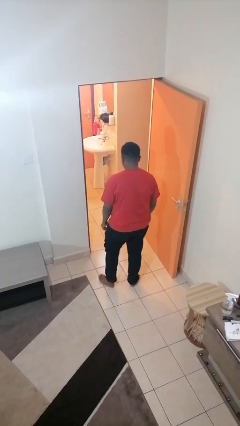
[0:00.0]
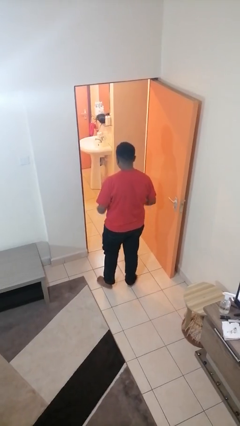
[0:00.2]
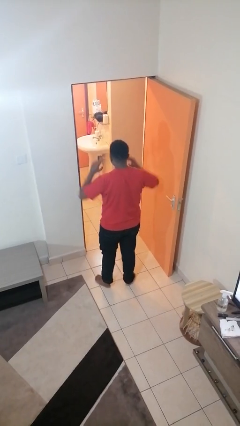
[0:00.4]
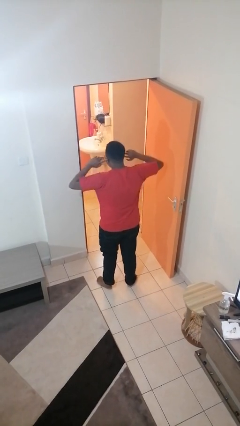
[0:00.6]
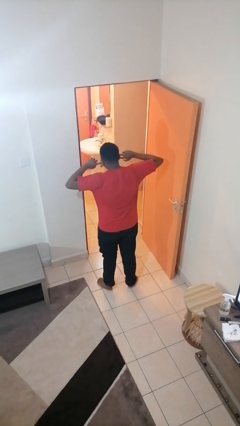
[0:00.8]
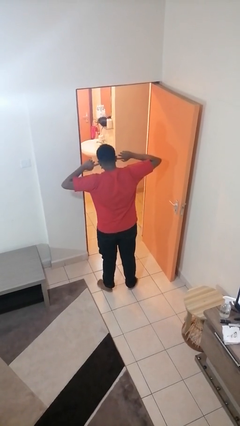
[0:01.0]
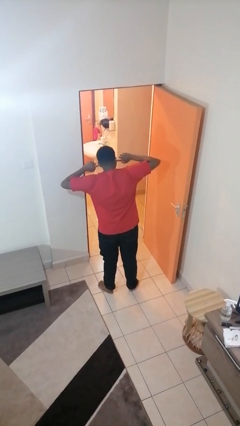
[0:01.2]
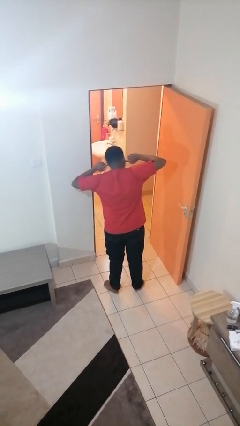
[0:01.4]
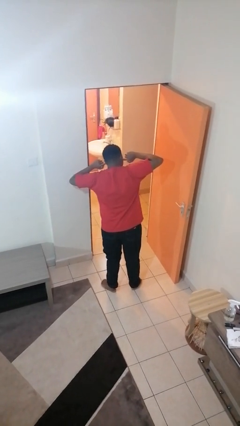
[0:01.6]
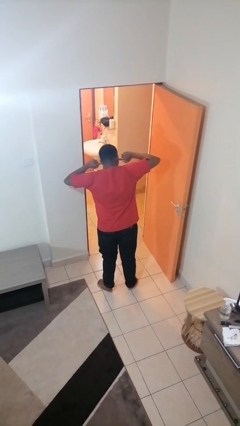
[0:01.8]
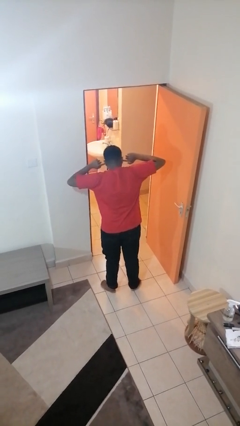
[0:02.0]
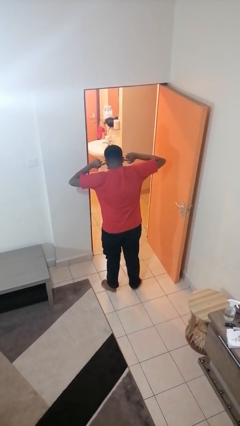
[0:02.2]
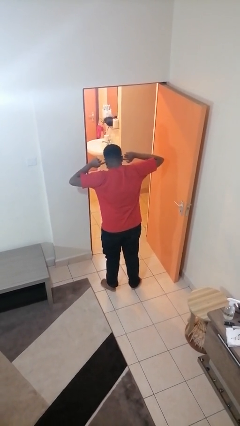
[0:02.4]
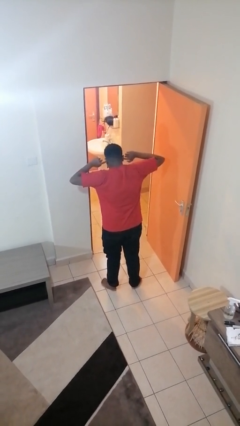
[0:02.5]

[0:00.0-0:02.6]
person puts fingers in ear

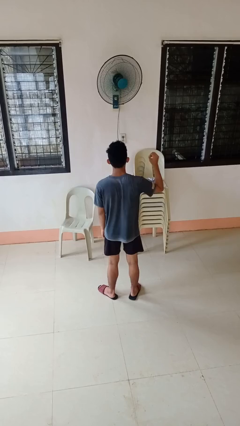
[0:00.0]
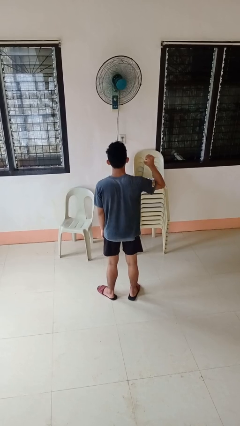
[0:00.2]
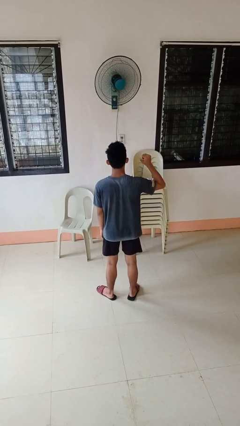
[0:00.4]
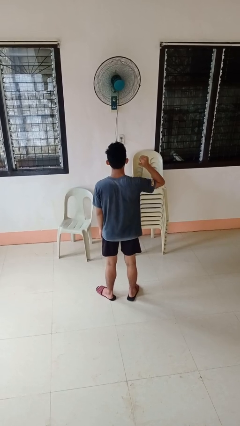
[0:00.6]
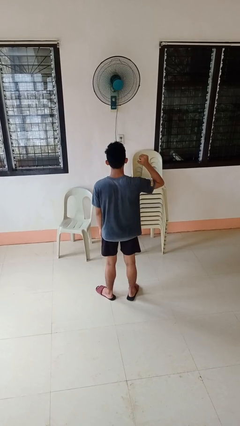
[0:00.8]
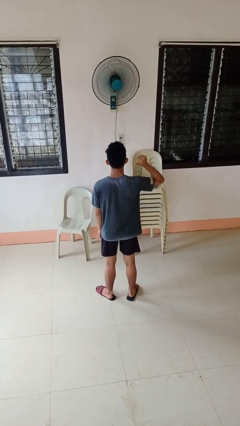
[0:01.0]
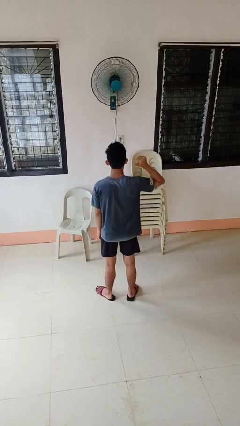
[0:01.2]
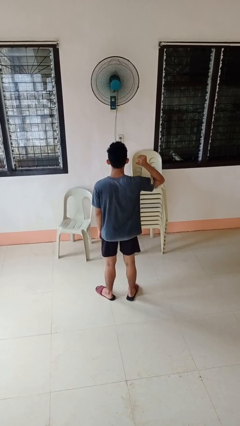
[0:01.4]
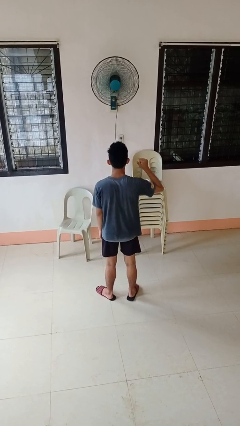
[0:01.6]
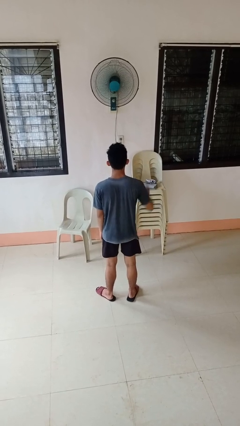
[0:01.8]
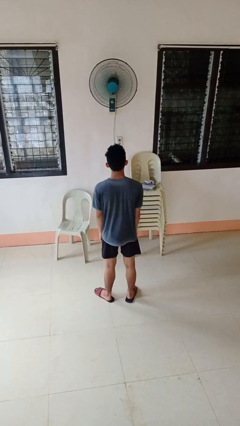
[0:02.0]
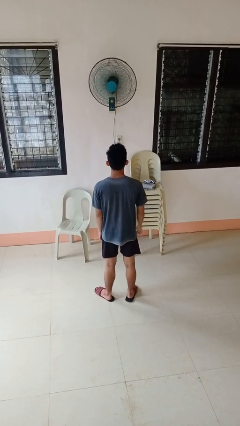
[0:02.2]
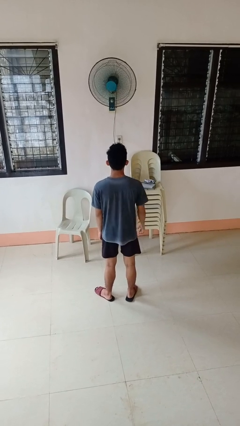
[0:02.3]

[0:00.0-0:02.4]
person gestures behind me

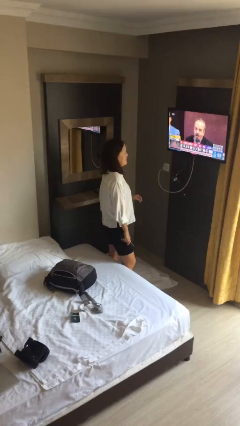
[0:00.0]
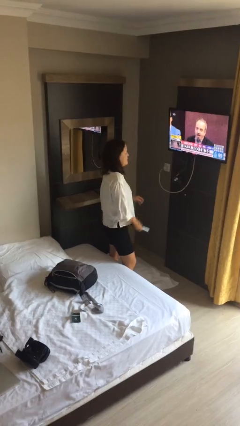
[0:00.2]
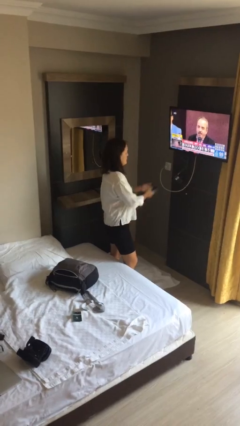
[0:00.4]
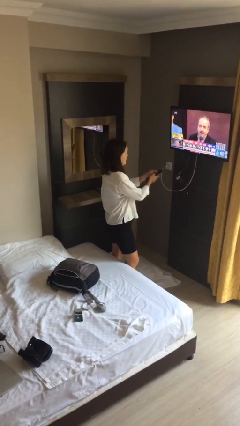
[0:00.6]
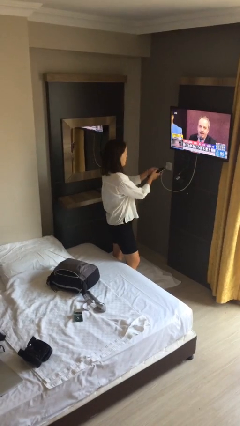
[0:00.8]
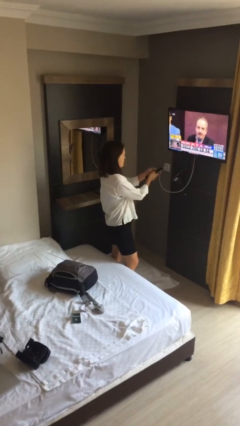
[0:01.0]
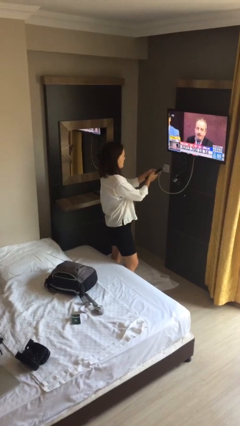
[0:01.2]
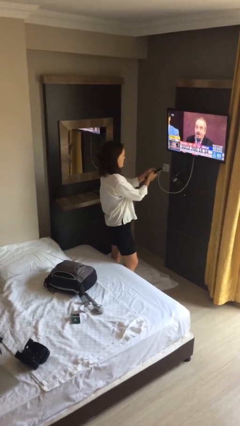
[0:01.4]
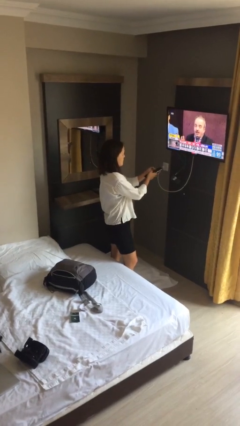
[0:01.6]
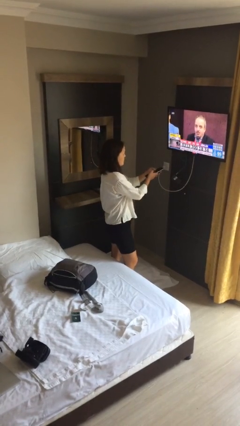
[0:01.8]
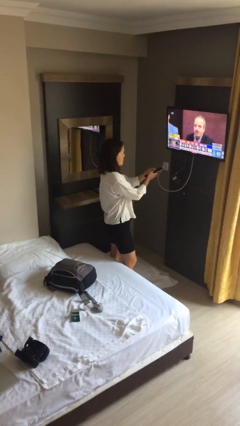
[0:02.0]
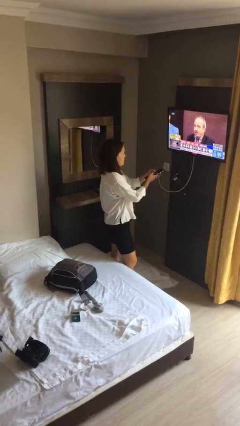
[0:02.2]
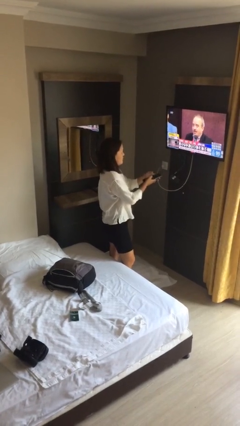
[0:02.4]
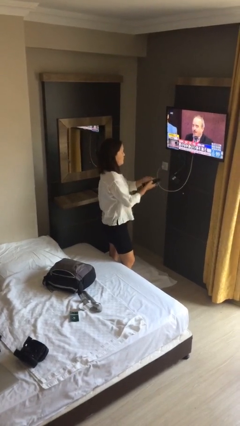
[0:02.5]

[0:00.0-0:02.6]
person uses television remote

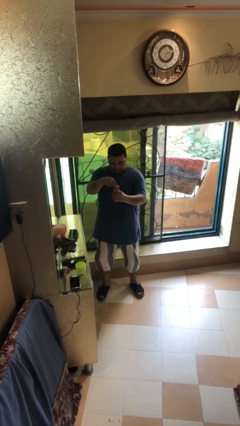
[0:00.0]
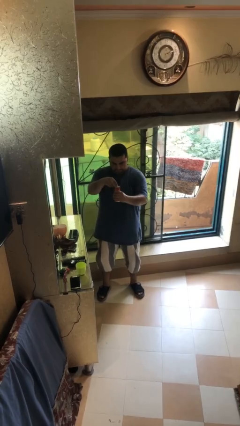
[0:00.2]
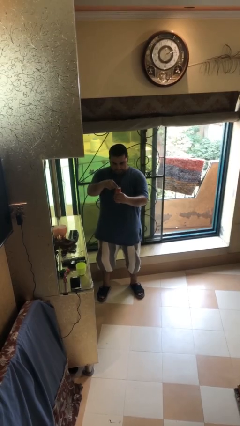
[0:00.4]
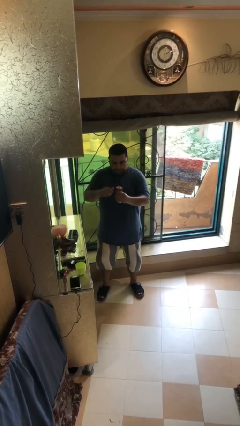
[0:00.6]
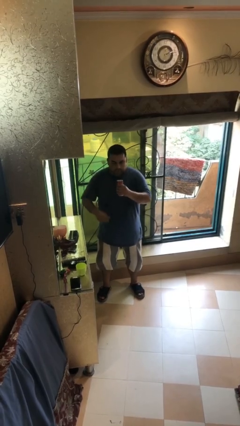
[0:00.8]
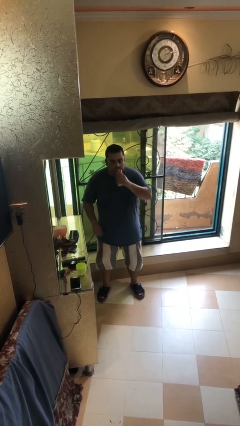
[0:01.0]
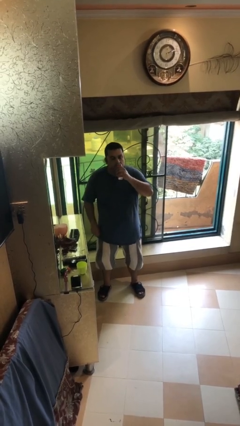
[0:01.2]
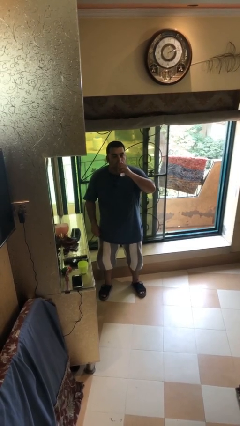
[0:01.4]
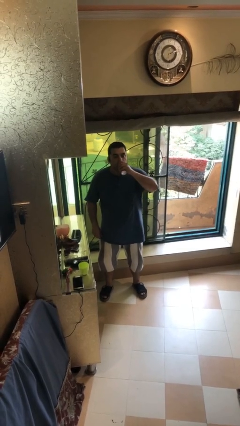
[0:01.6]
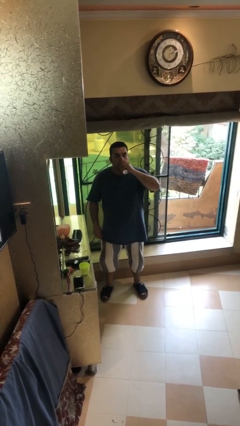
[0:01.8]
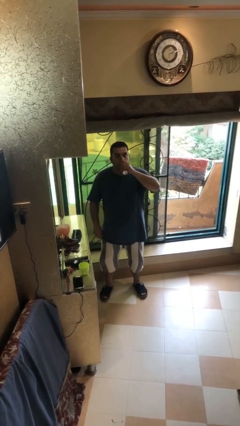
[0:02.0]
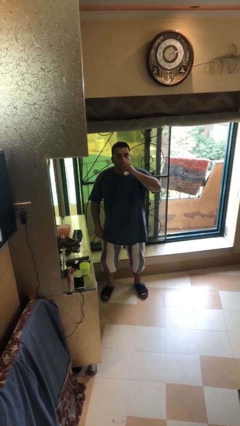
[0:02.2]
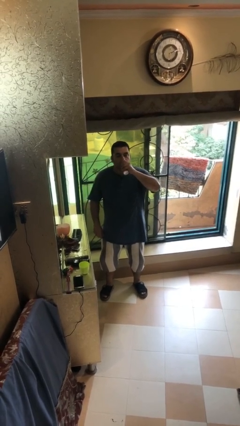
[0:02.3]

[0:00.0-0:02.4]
person drinks from beverage can

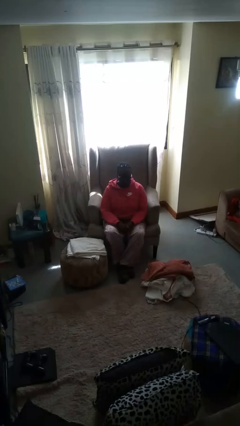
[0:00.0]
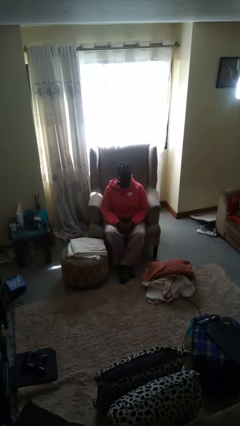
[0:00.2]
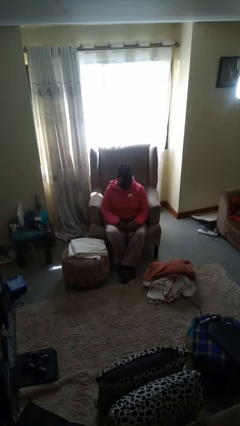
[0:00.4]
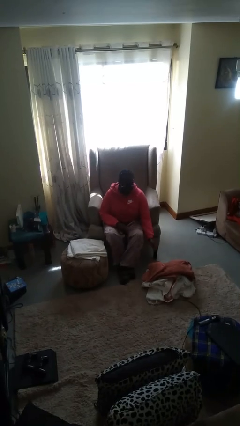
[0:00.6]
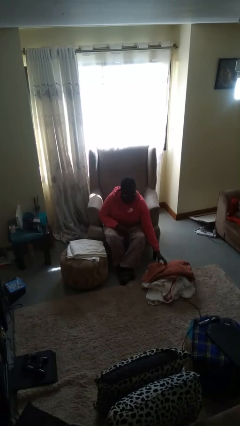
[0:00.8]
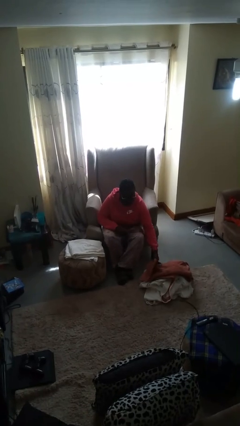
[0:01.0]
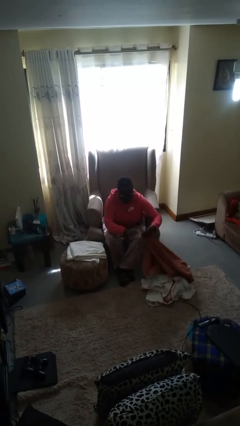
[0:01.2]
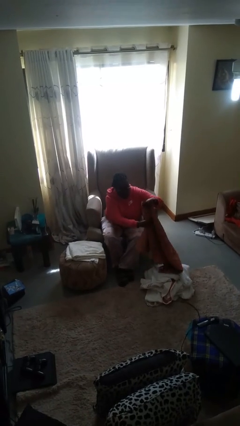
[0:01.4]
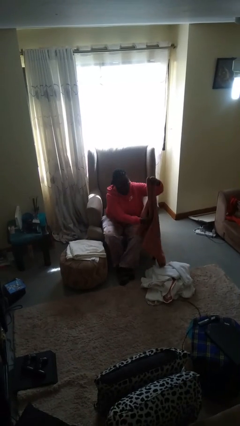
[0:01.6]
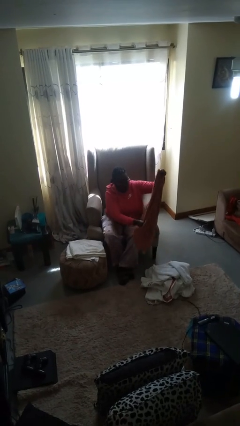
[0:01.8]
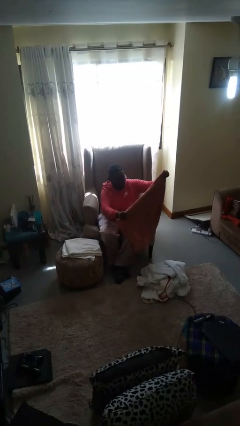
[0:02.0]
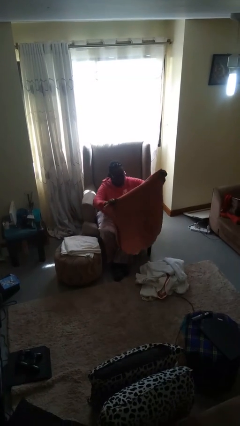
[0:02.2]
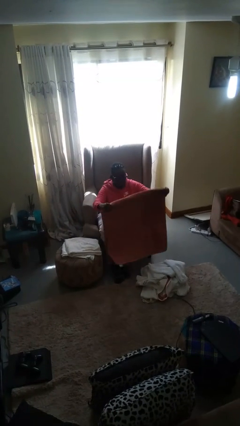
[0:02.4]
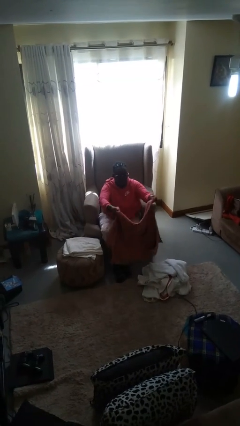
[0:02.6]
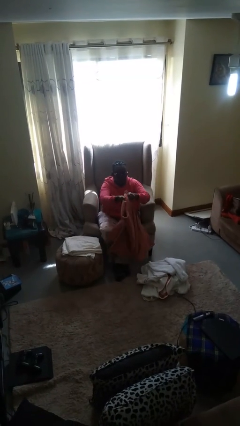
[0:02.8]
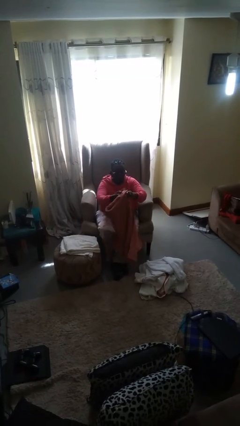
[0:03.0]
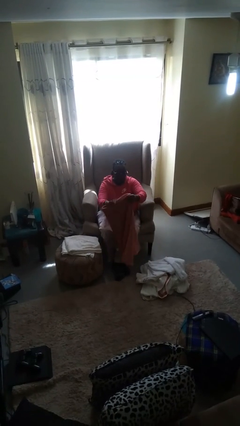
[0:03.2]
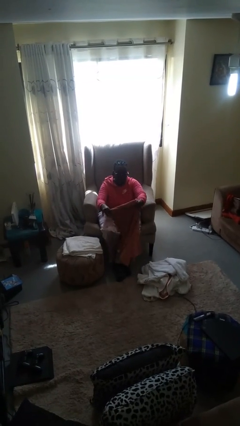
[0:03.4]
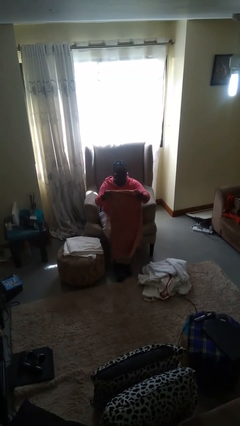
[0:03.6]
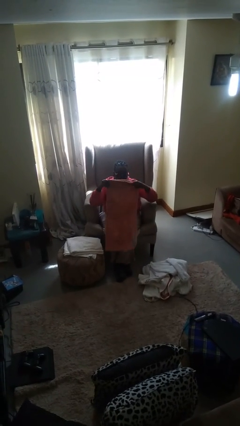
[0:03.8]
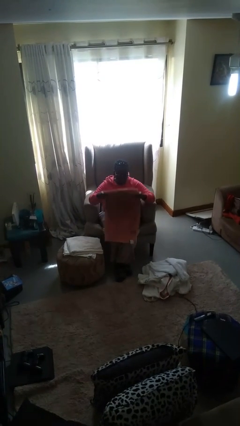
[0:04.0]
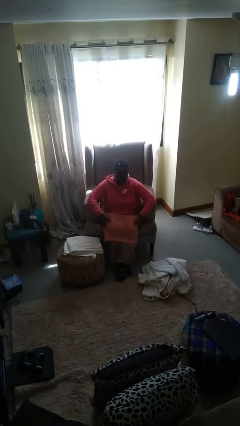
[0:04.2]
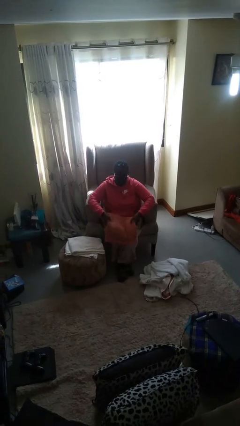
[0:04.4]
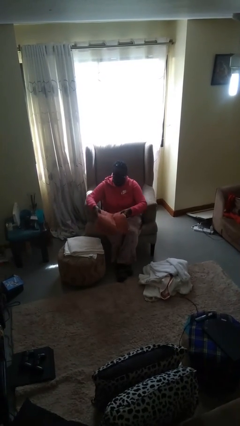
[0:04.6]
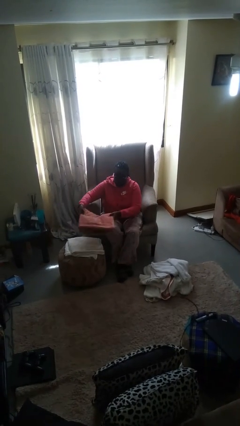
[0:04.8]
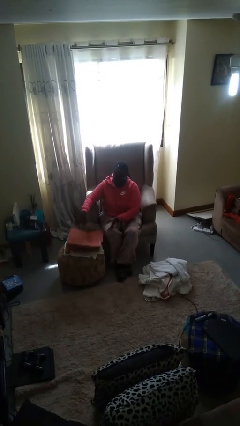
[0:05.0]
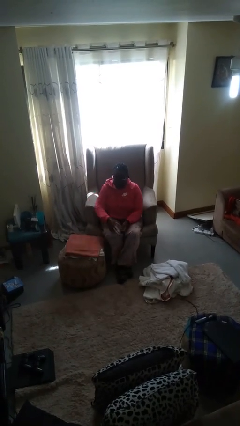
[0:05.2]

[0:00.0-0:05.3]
person folds towel

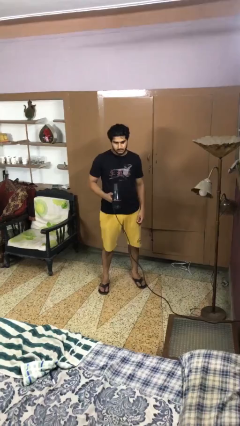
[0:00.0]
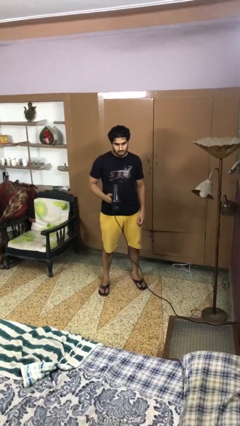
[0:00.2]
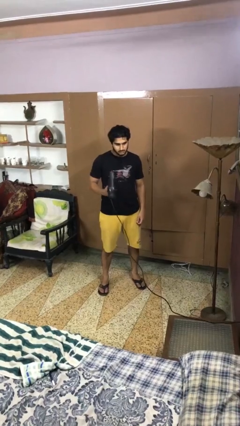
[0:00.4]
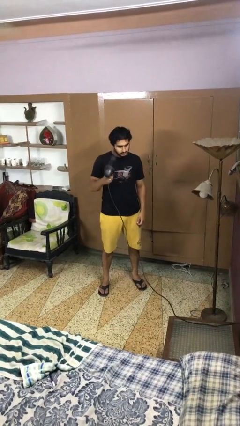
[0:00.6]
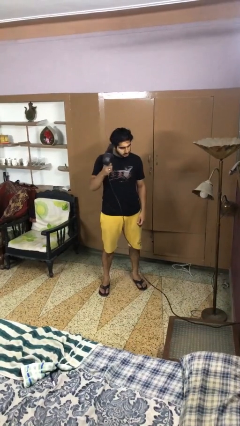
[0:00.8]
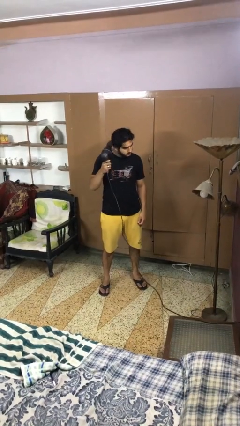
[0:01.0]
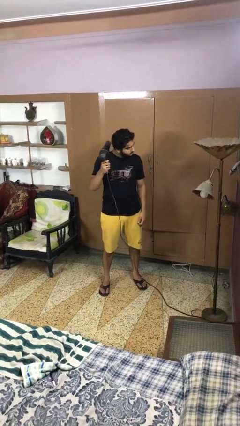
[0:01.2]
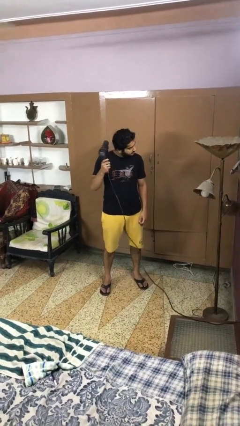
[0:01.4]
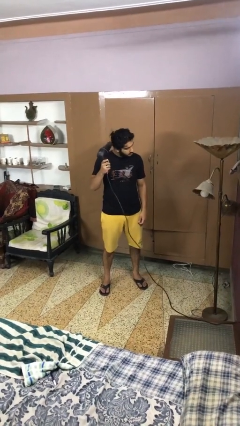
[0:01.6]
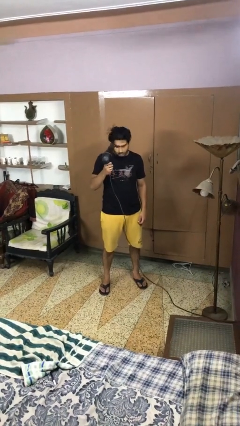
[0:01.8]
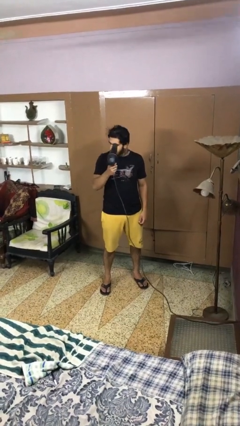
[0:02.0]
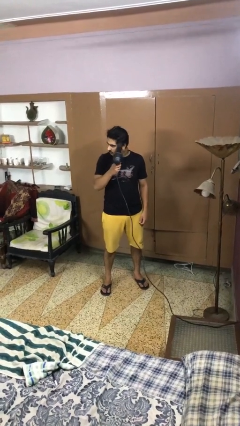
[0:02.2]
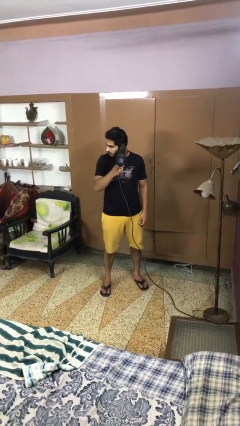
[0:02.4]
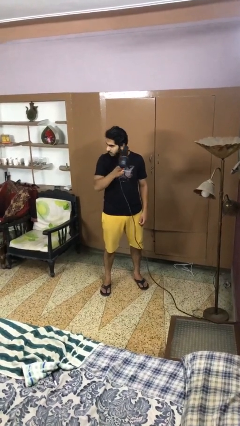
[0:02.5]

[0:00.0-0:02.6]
person dries hair with hairdryer
